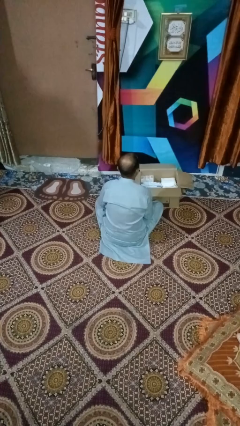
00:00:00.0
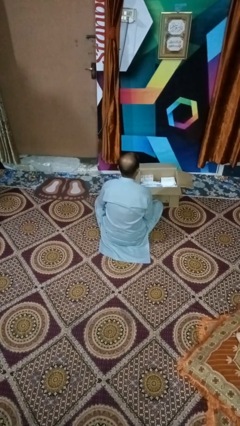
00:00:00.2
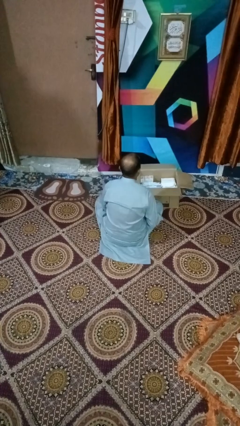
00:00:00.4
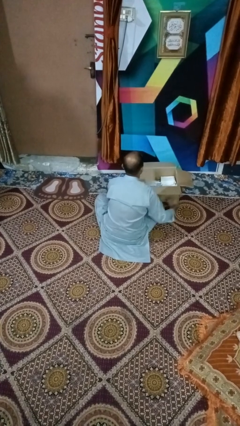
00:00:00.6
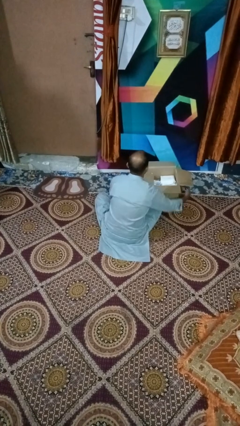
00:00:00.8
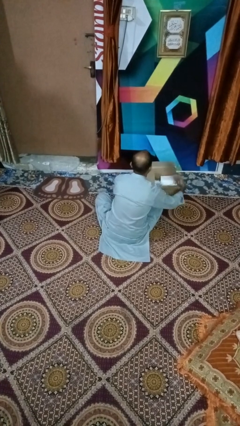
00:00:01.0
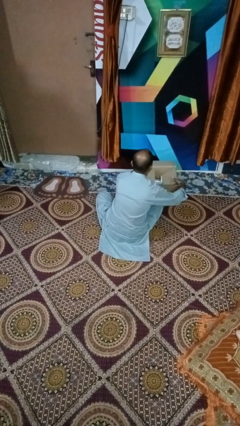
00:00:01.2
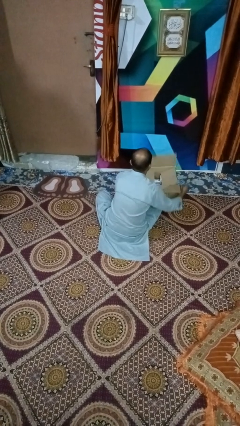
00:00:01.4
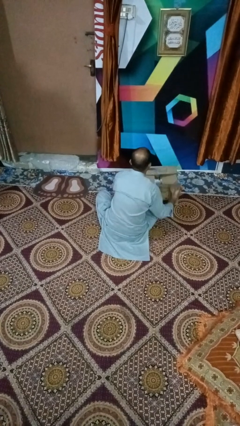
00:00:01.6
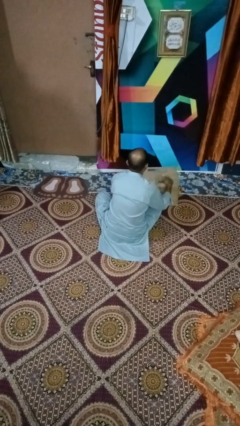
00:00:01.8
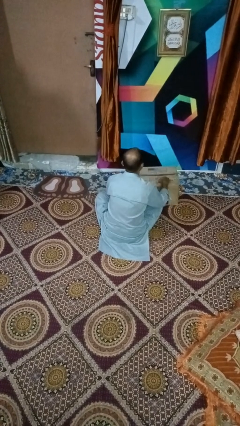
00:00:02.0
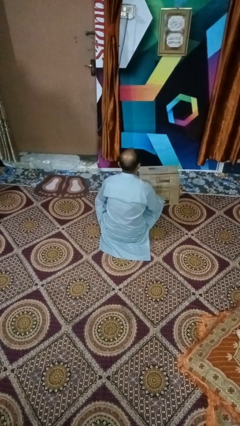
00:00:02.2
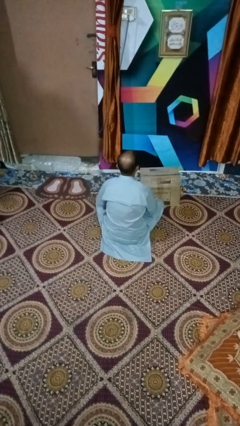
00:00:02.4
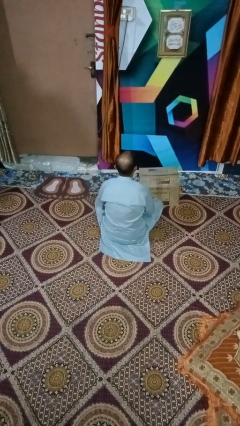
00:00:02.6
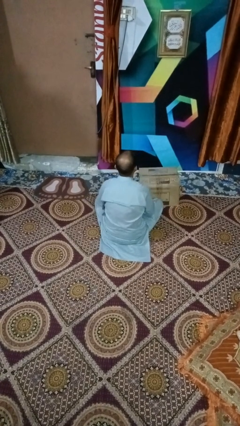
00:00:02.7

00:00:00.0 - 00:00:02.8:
person closes box

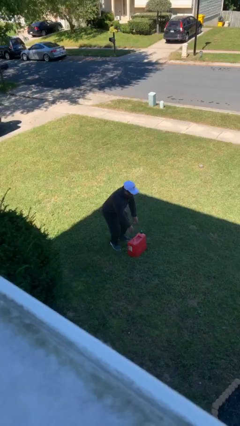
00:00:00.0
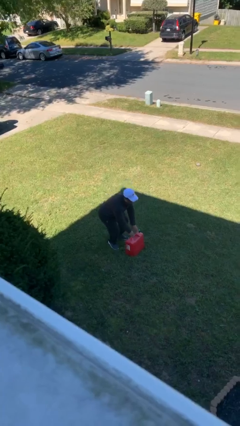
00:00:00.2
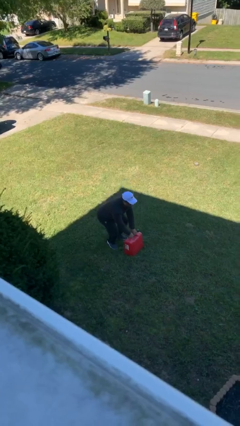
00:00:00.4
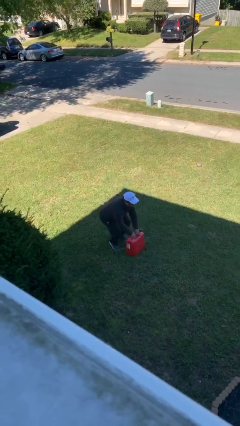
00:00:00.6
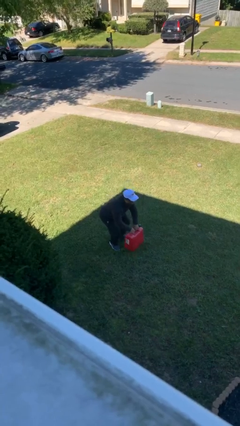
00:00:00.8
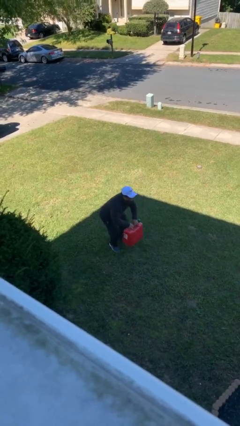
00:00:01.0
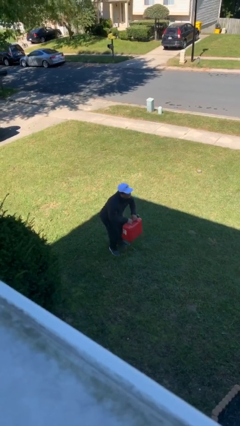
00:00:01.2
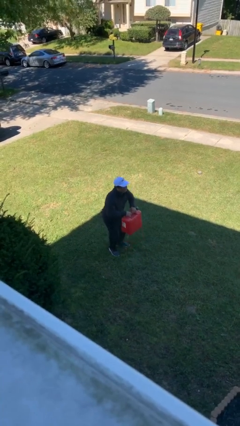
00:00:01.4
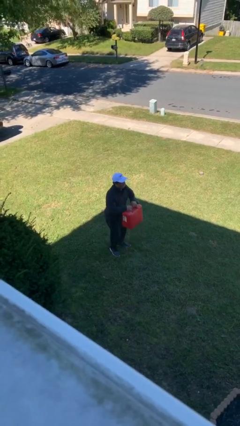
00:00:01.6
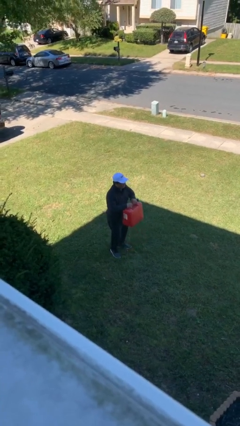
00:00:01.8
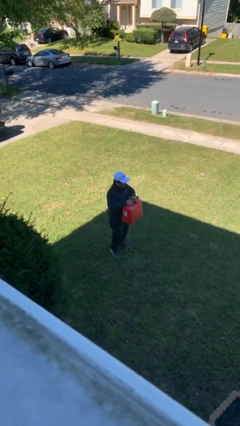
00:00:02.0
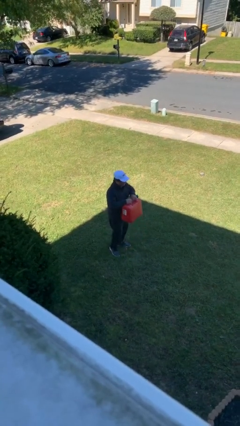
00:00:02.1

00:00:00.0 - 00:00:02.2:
person picks up object from floor

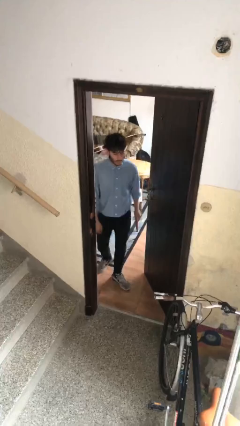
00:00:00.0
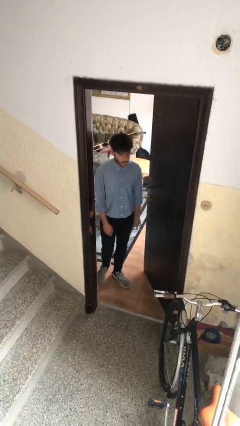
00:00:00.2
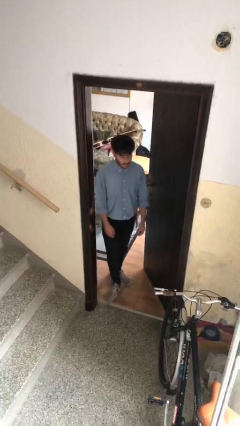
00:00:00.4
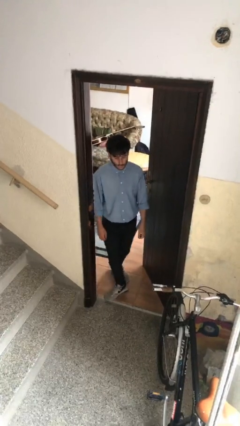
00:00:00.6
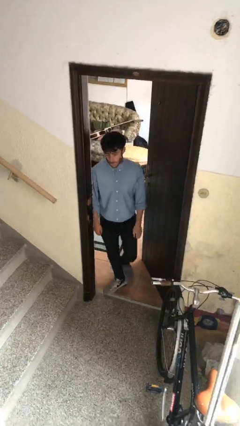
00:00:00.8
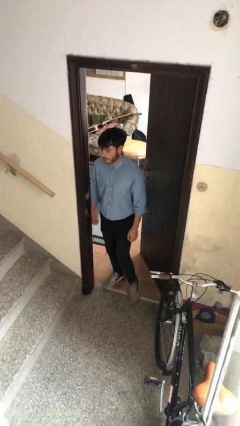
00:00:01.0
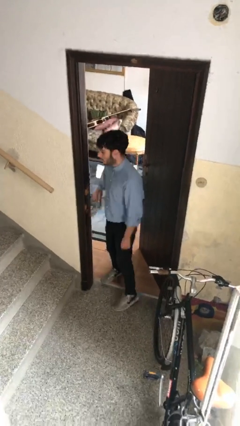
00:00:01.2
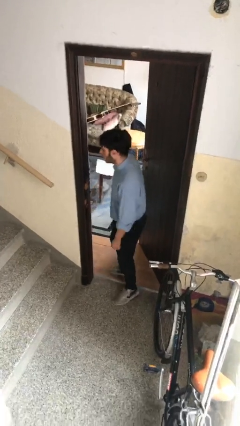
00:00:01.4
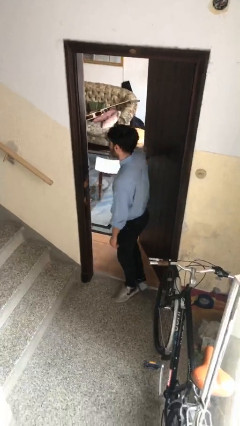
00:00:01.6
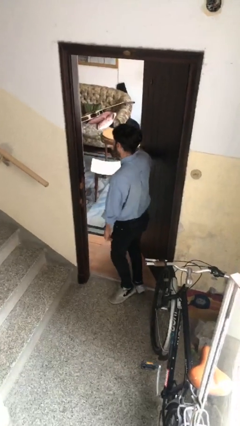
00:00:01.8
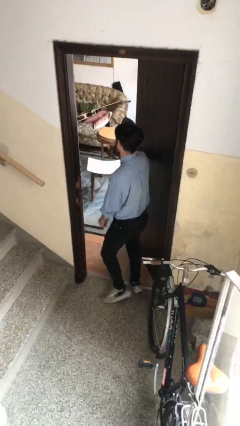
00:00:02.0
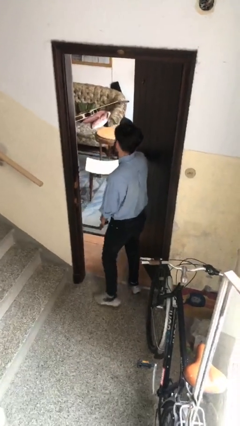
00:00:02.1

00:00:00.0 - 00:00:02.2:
person enters scene through structure

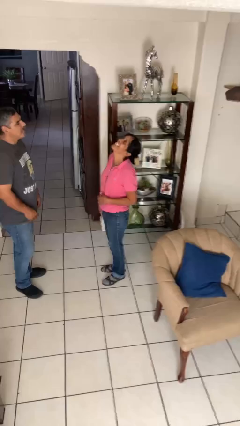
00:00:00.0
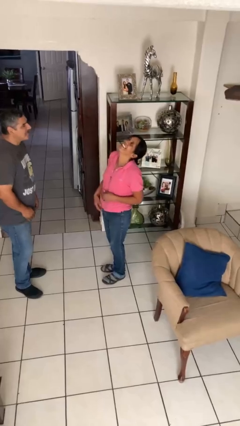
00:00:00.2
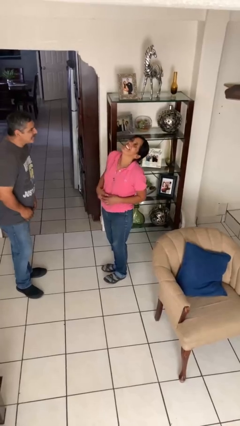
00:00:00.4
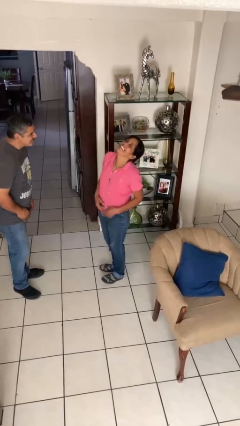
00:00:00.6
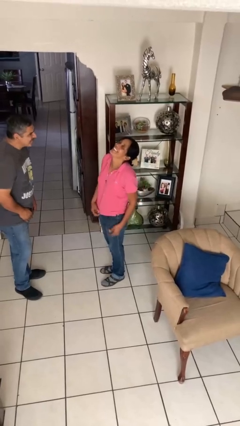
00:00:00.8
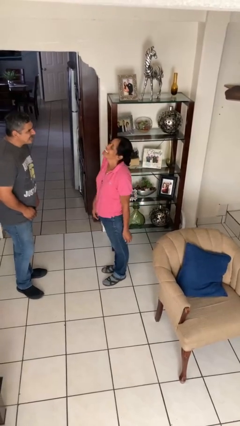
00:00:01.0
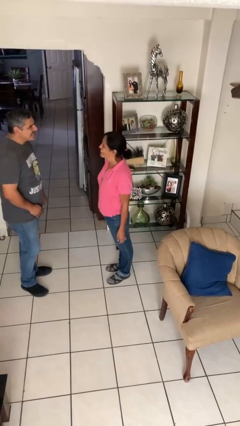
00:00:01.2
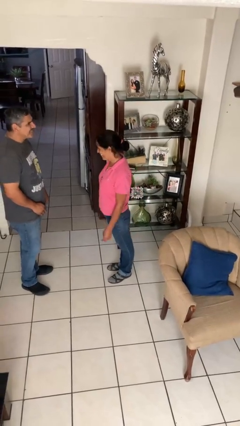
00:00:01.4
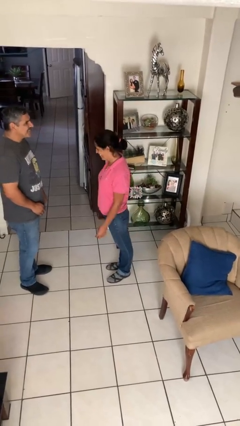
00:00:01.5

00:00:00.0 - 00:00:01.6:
person laughs with person

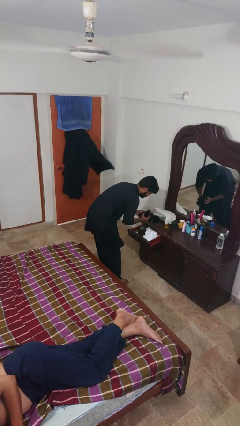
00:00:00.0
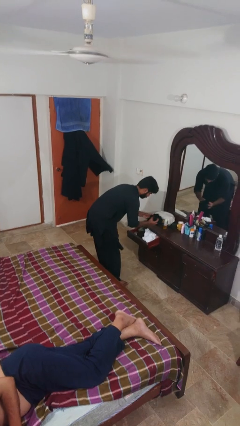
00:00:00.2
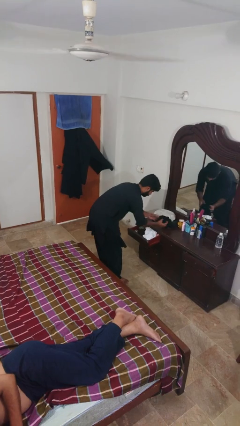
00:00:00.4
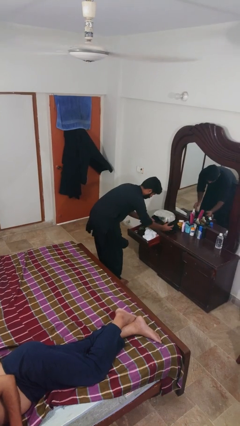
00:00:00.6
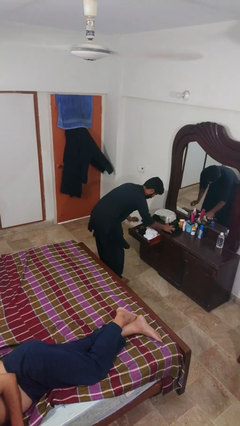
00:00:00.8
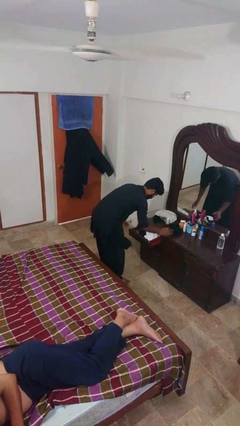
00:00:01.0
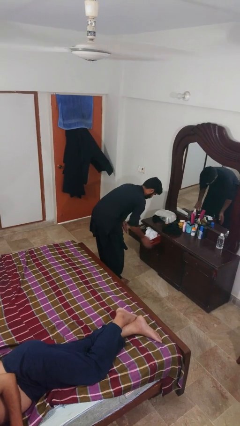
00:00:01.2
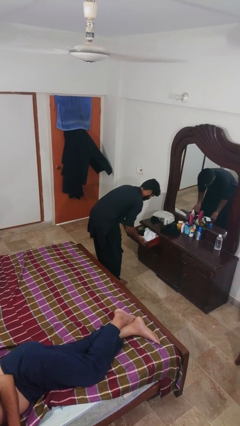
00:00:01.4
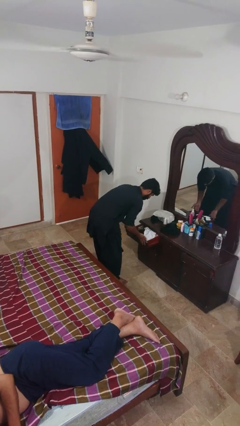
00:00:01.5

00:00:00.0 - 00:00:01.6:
person takes clothes from dresser

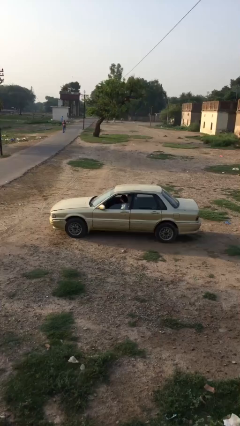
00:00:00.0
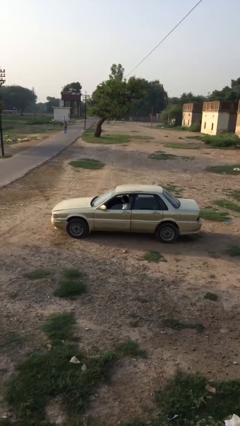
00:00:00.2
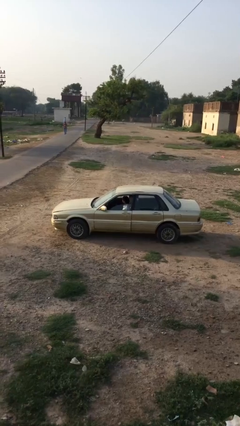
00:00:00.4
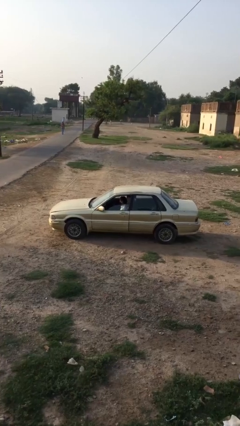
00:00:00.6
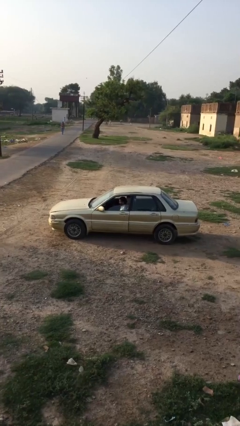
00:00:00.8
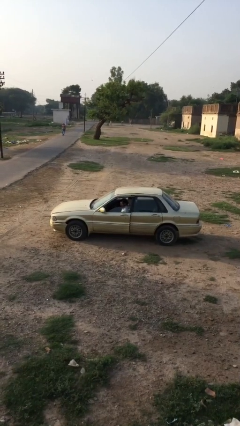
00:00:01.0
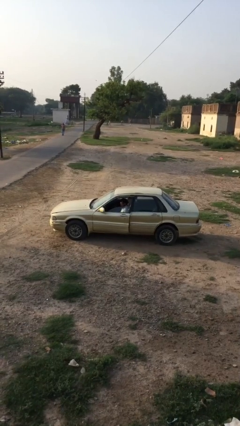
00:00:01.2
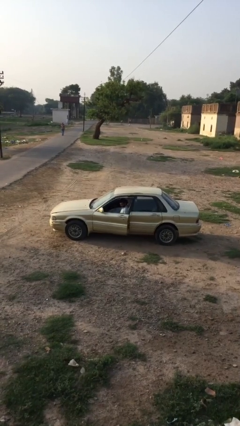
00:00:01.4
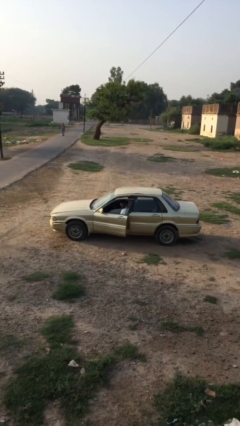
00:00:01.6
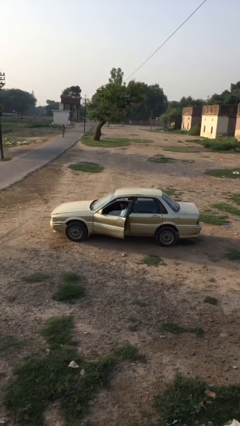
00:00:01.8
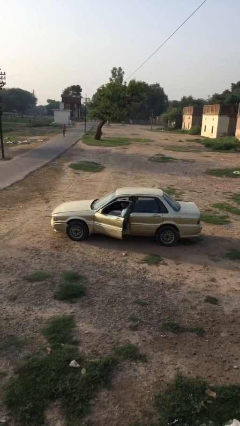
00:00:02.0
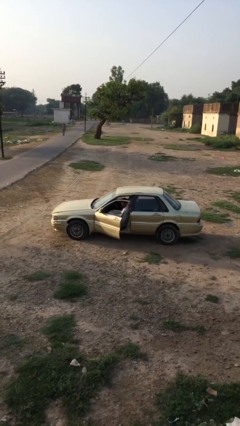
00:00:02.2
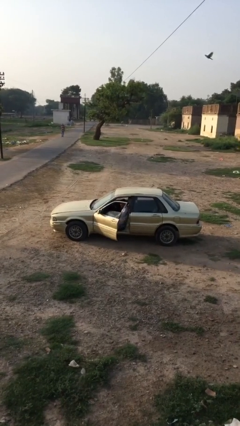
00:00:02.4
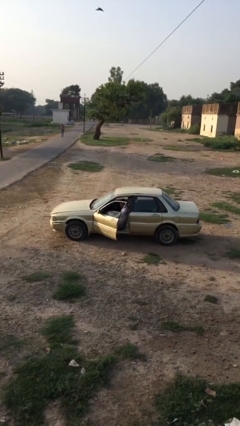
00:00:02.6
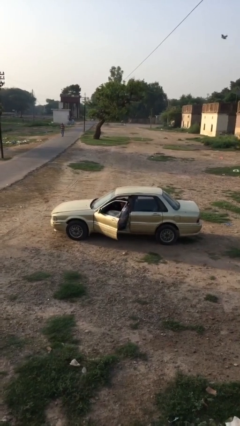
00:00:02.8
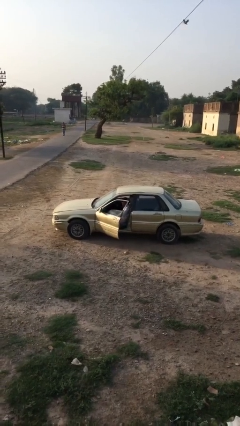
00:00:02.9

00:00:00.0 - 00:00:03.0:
person opens car door

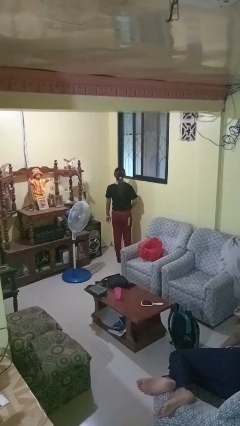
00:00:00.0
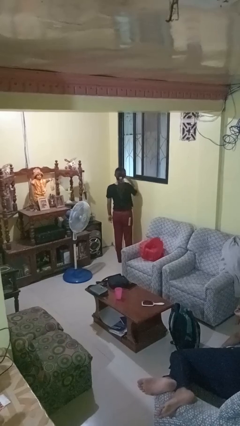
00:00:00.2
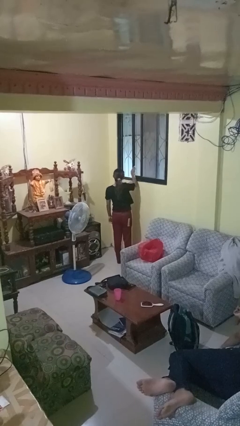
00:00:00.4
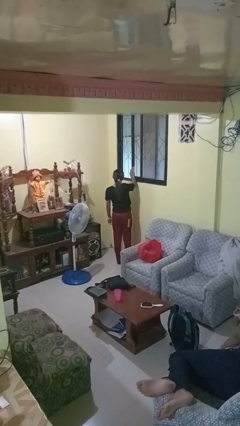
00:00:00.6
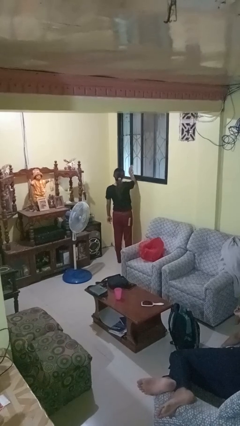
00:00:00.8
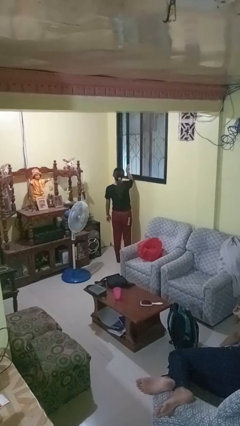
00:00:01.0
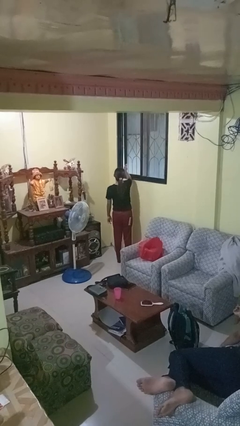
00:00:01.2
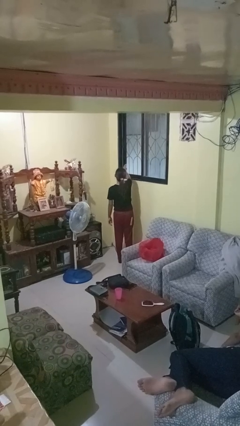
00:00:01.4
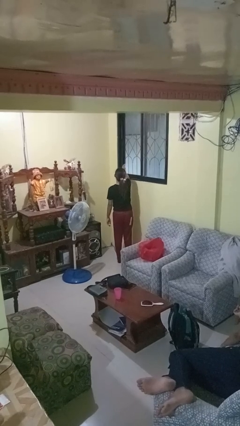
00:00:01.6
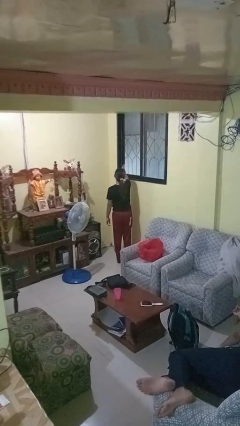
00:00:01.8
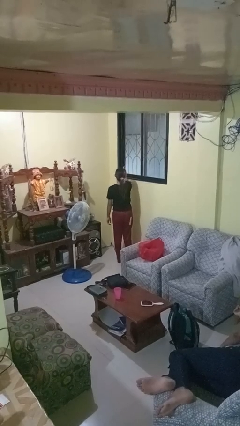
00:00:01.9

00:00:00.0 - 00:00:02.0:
person closes home window

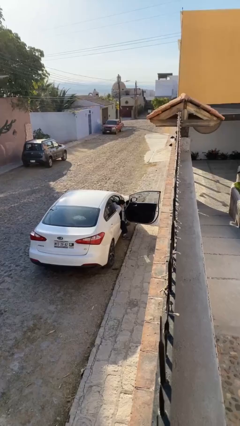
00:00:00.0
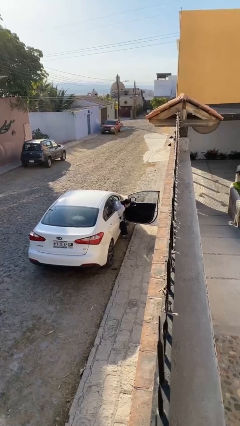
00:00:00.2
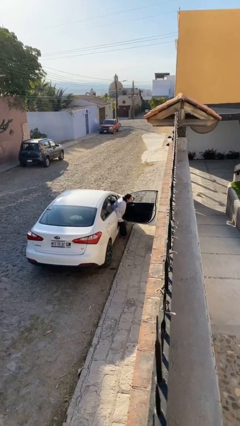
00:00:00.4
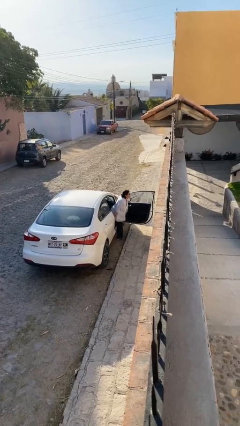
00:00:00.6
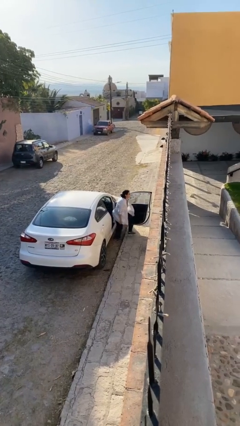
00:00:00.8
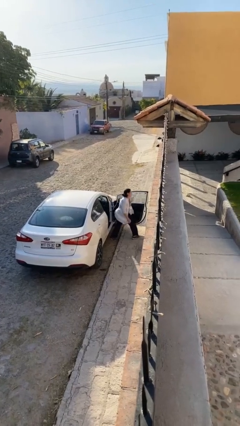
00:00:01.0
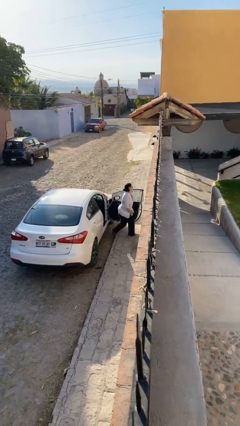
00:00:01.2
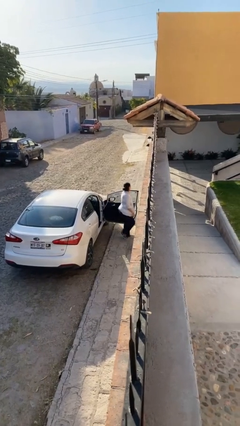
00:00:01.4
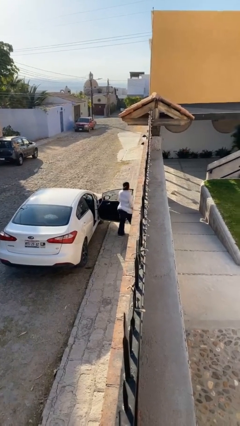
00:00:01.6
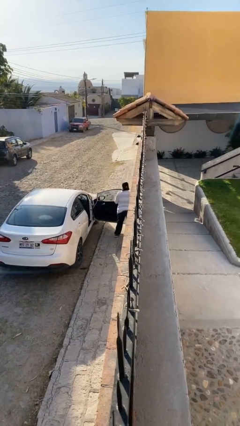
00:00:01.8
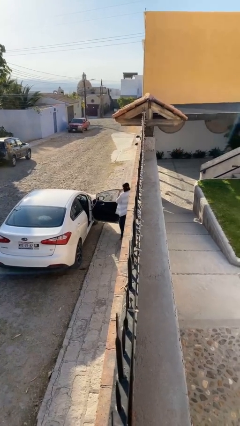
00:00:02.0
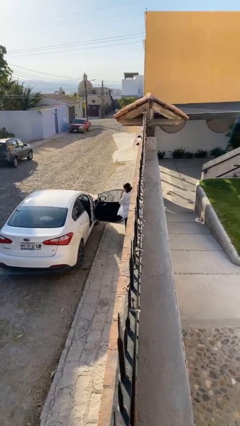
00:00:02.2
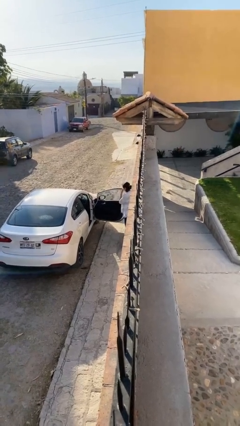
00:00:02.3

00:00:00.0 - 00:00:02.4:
person exits car
